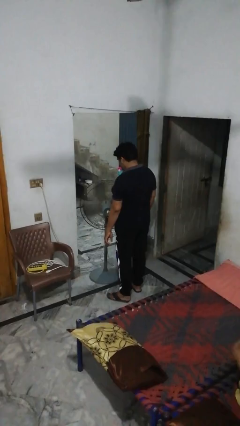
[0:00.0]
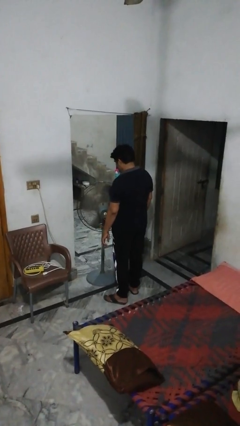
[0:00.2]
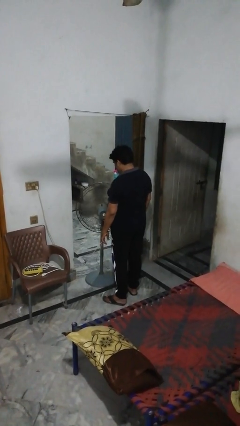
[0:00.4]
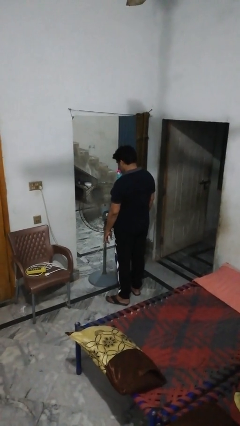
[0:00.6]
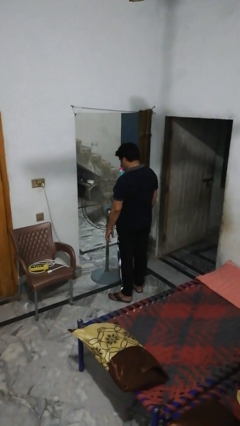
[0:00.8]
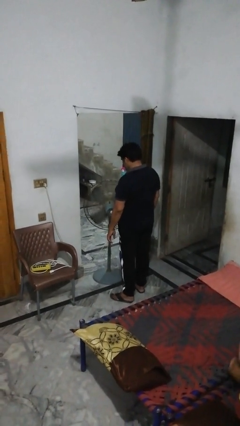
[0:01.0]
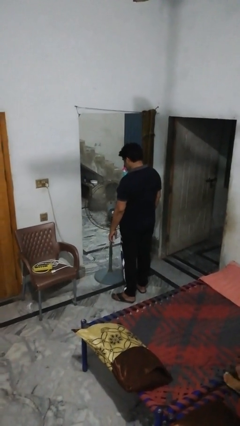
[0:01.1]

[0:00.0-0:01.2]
person turns off fan

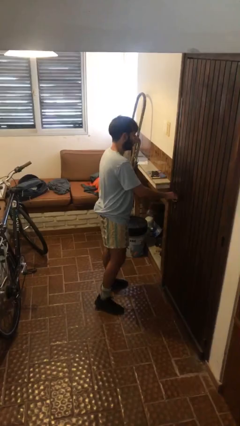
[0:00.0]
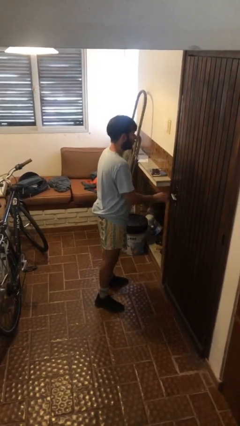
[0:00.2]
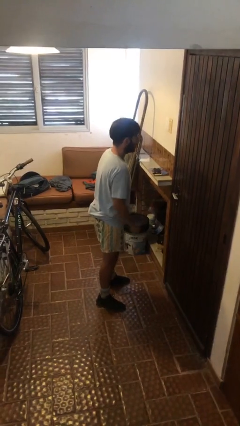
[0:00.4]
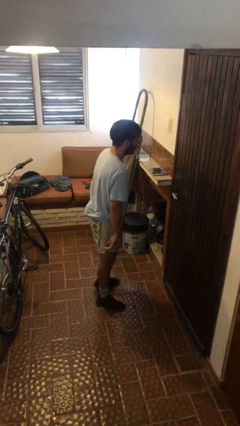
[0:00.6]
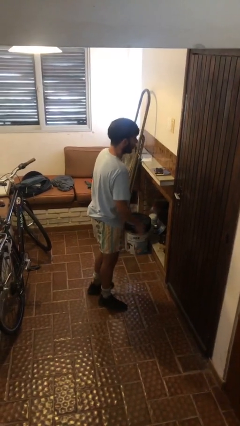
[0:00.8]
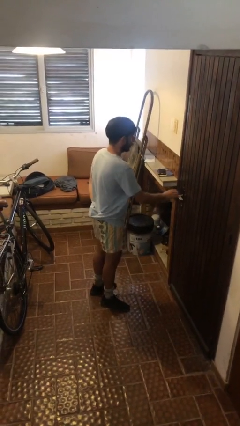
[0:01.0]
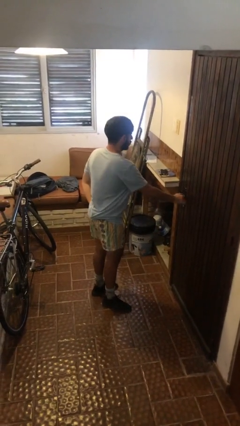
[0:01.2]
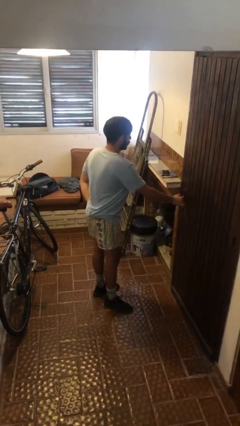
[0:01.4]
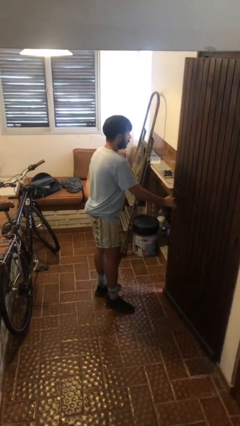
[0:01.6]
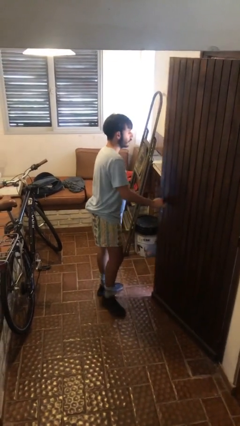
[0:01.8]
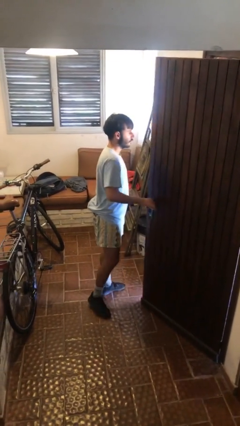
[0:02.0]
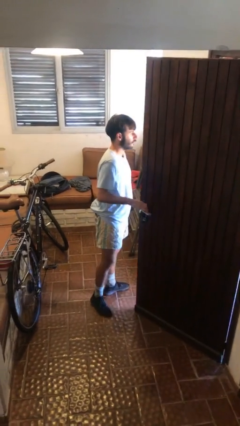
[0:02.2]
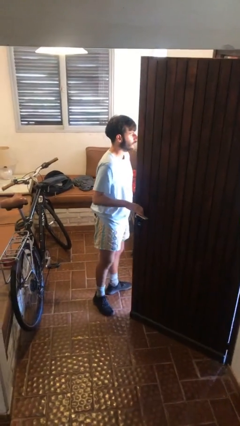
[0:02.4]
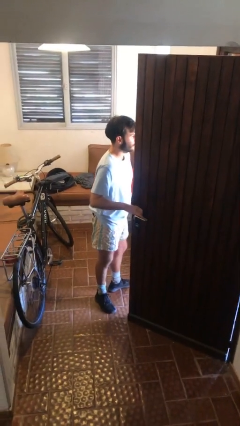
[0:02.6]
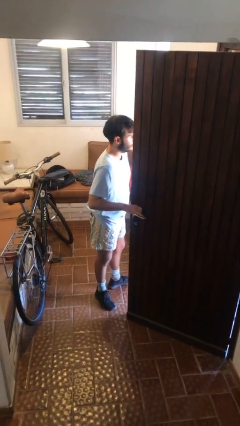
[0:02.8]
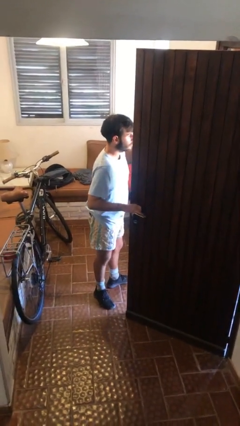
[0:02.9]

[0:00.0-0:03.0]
person opens facility door

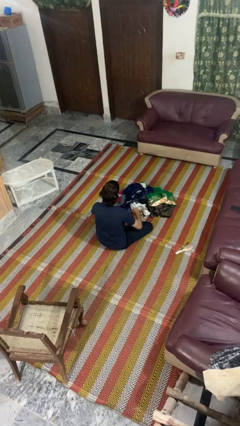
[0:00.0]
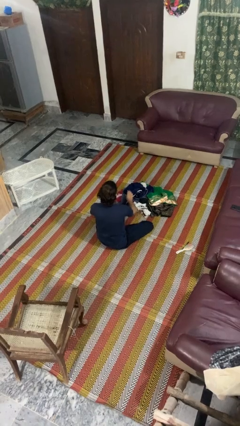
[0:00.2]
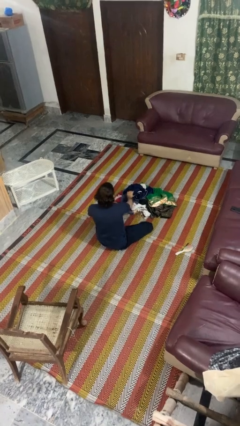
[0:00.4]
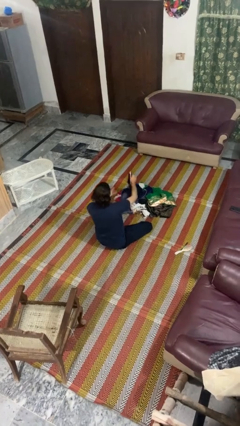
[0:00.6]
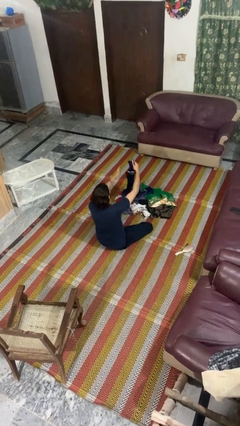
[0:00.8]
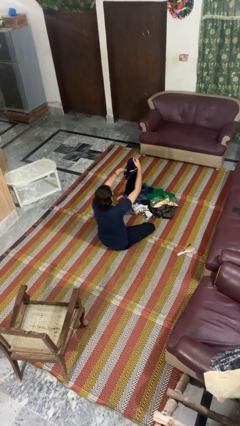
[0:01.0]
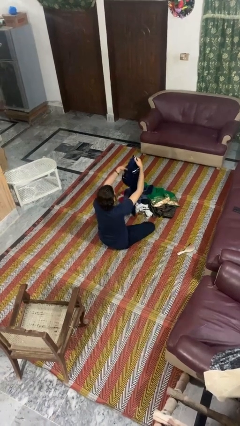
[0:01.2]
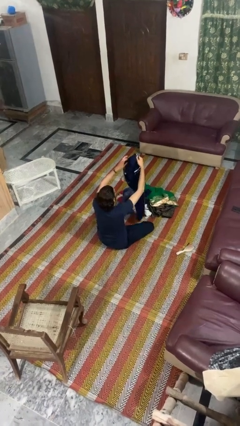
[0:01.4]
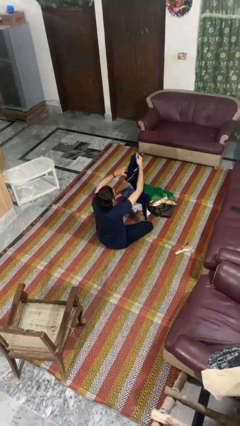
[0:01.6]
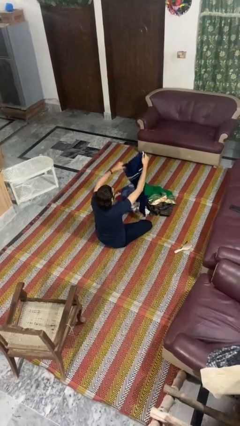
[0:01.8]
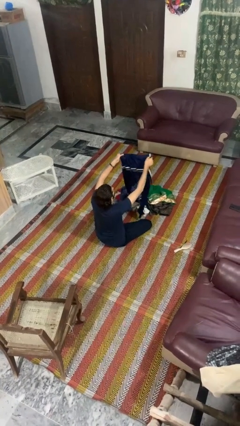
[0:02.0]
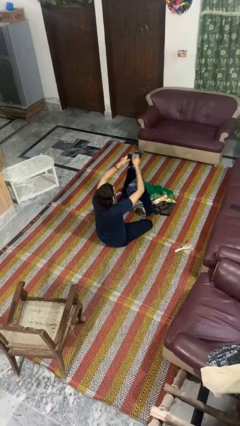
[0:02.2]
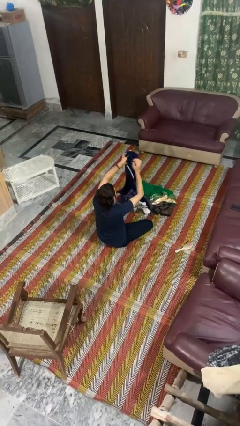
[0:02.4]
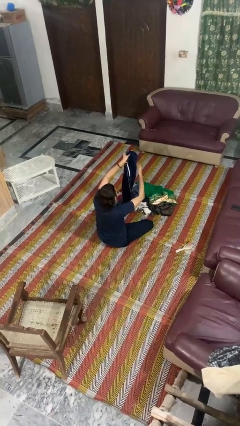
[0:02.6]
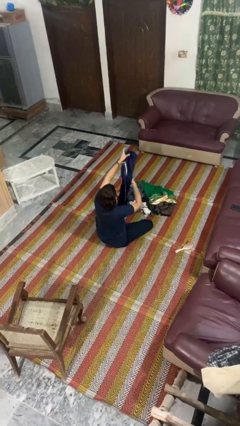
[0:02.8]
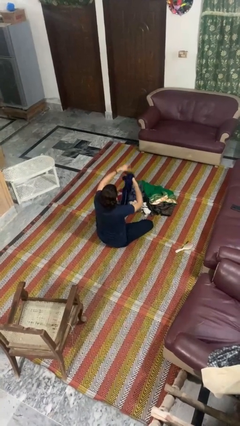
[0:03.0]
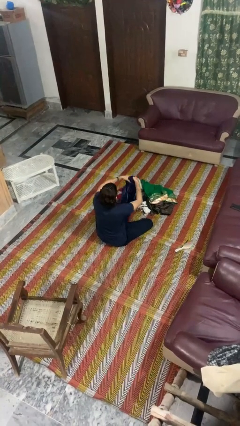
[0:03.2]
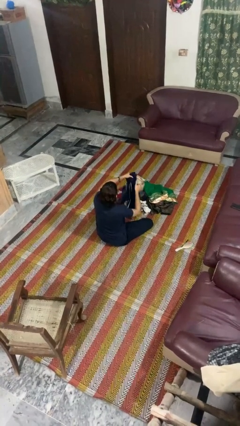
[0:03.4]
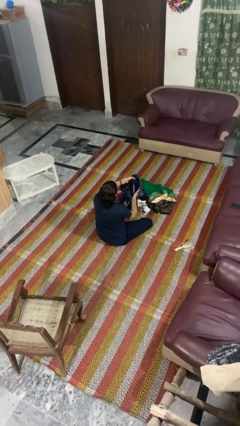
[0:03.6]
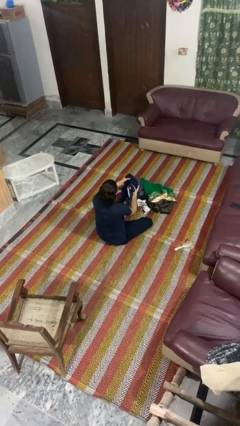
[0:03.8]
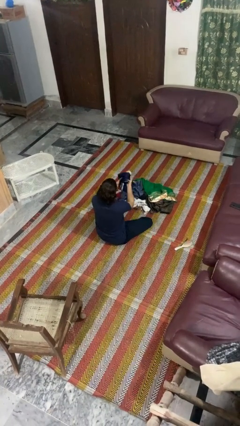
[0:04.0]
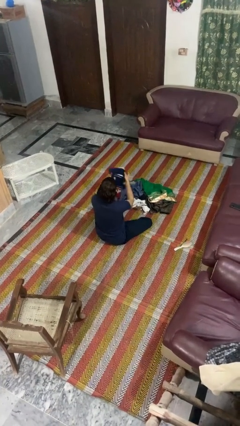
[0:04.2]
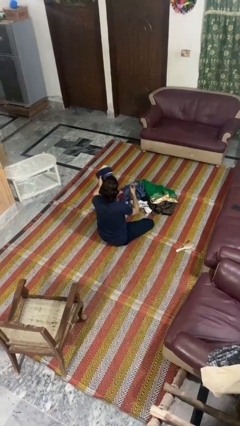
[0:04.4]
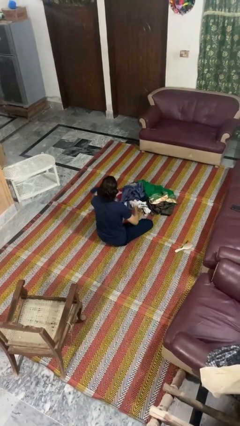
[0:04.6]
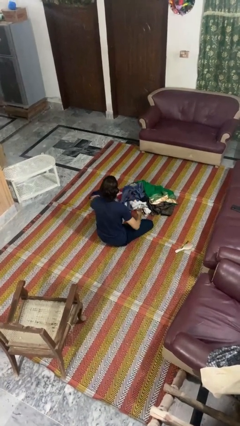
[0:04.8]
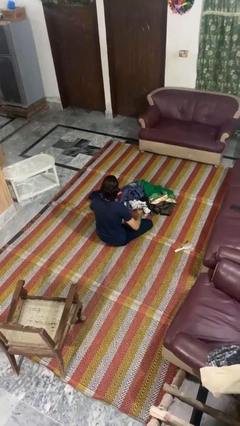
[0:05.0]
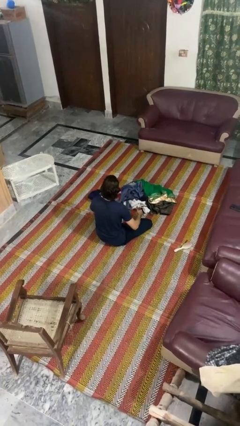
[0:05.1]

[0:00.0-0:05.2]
person folds pants

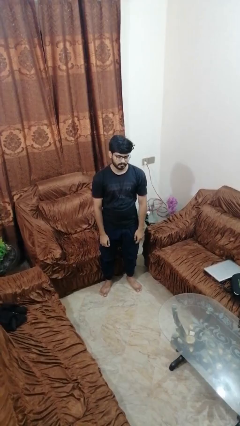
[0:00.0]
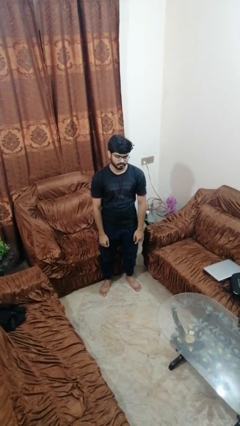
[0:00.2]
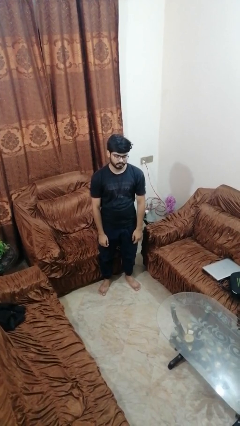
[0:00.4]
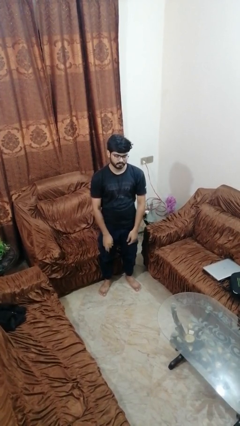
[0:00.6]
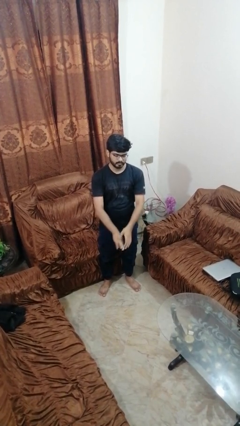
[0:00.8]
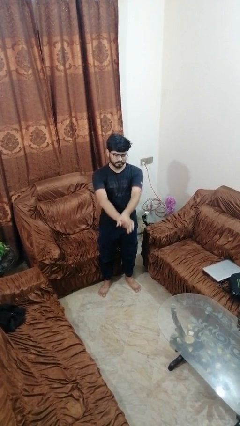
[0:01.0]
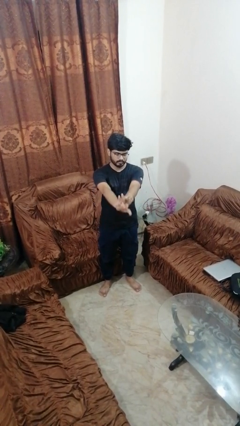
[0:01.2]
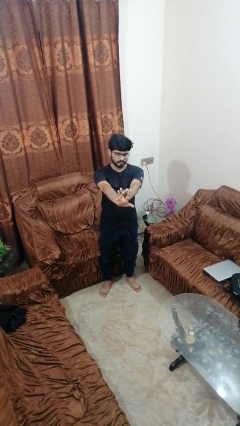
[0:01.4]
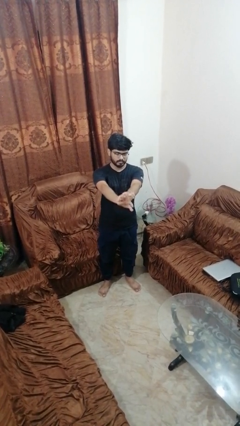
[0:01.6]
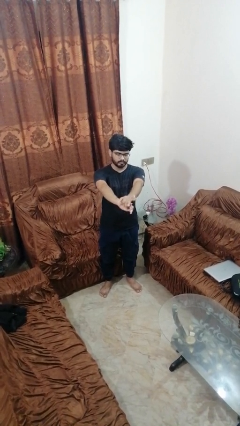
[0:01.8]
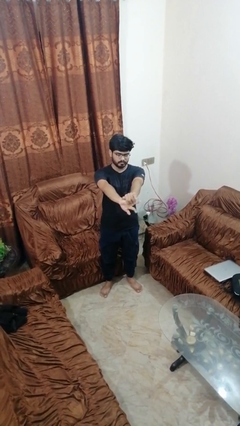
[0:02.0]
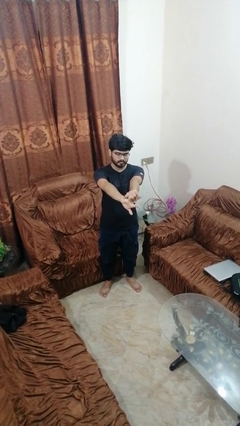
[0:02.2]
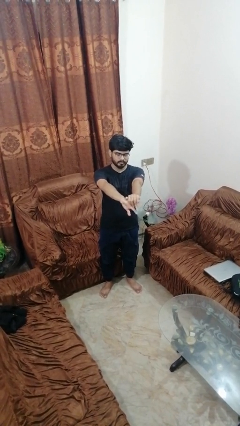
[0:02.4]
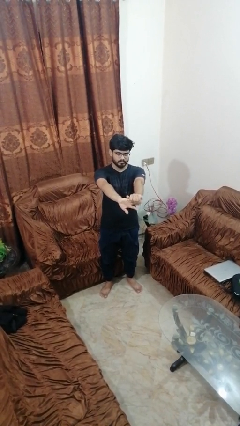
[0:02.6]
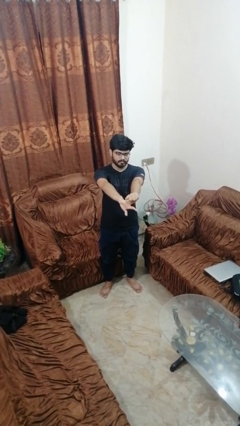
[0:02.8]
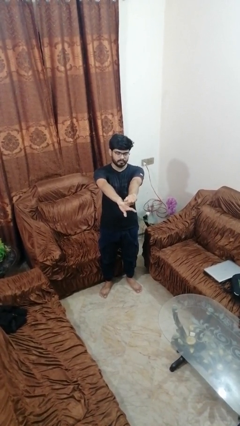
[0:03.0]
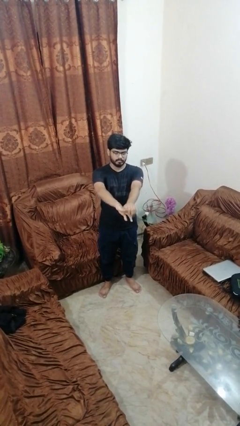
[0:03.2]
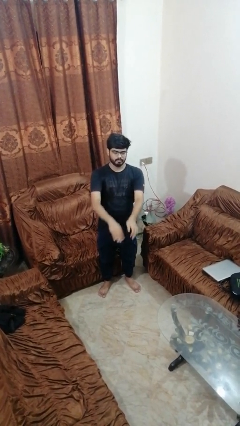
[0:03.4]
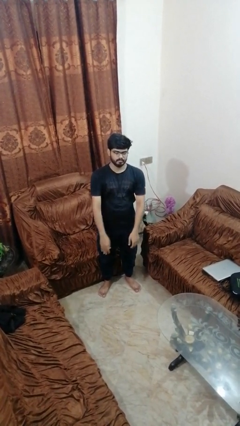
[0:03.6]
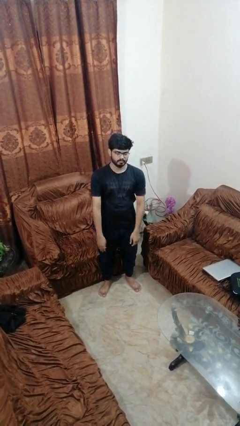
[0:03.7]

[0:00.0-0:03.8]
person cracks knuckles

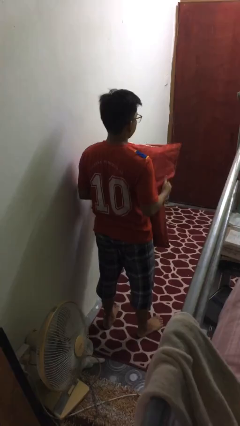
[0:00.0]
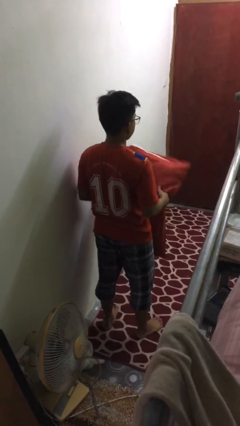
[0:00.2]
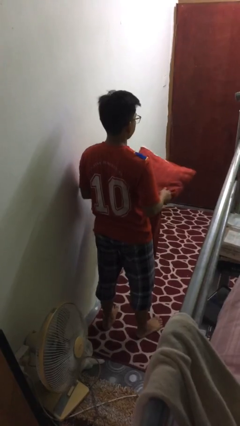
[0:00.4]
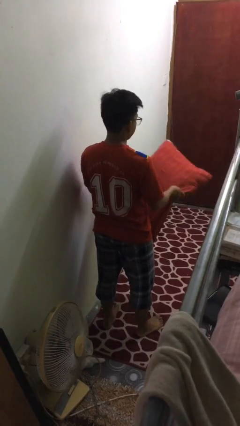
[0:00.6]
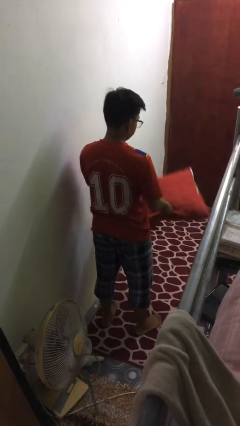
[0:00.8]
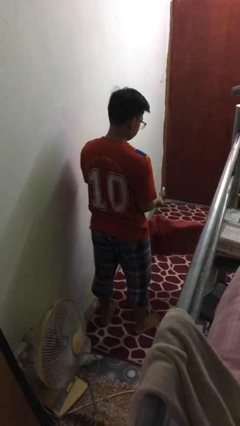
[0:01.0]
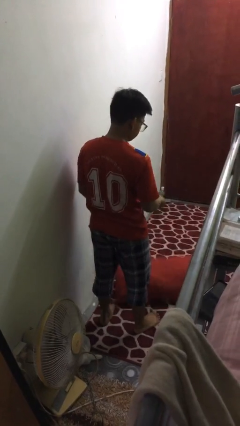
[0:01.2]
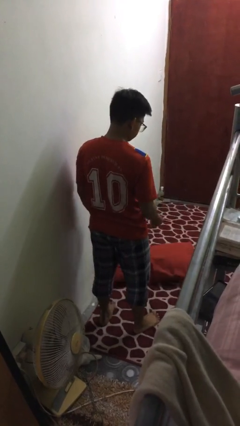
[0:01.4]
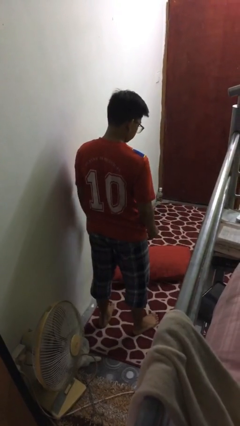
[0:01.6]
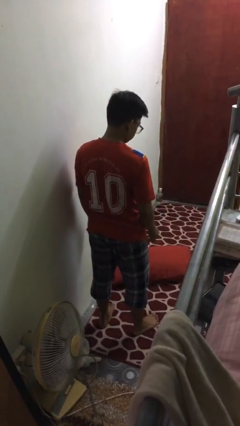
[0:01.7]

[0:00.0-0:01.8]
person drops object

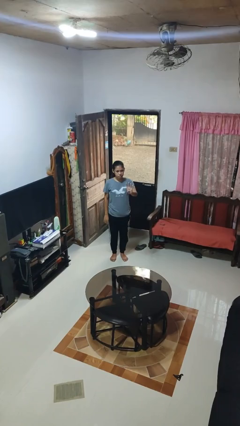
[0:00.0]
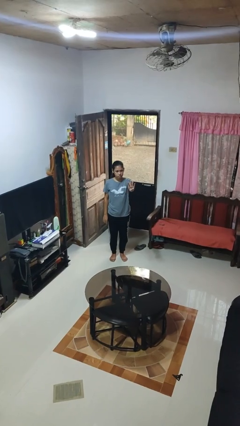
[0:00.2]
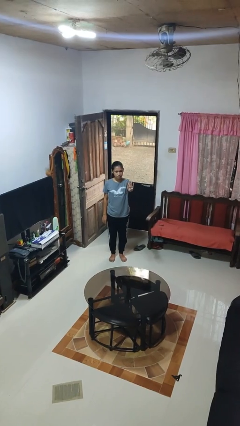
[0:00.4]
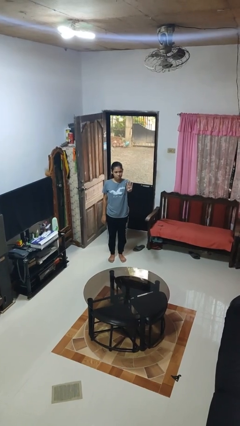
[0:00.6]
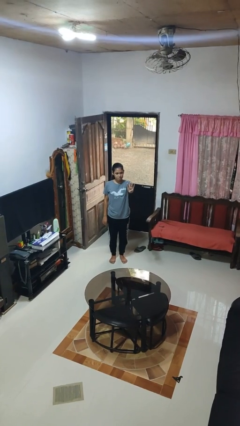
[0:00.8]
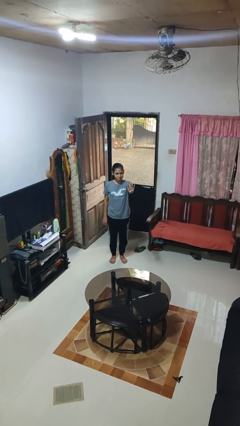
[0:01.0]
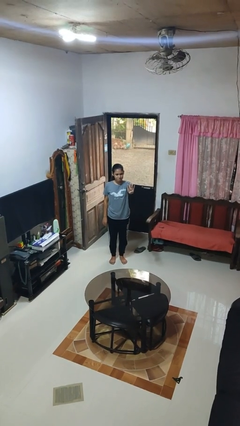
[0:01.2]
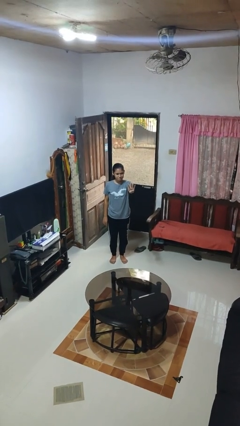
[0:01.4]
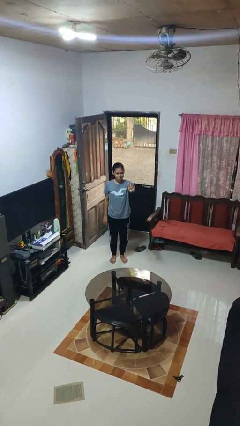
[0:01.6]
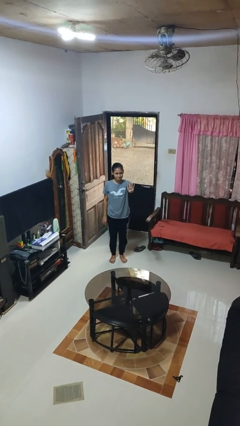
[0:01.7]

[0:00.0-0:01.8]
person gestures number four

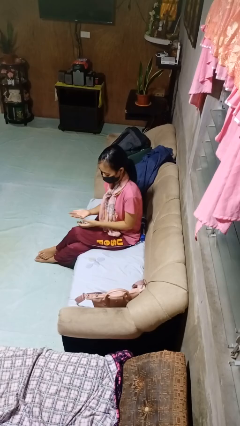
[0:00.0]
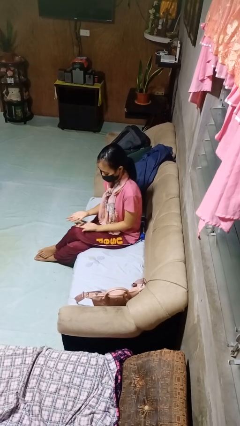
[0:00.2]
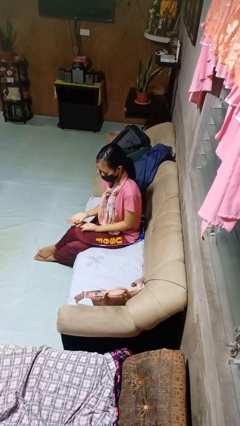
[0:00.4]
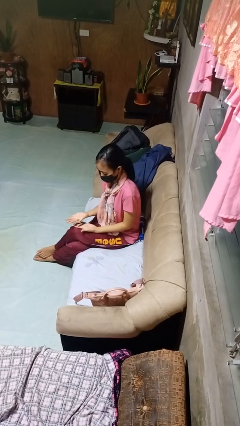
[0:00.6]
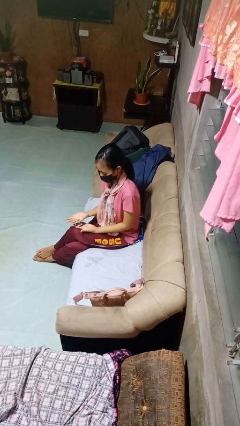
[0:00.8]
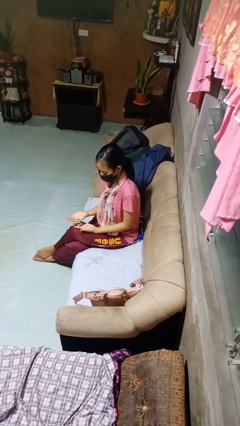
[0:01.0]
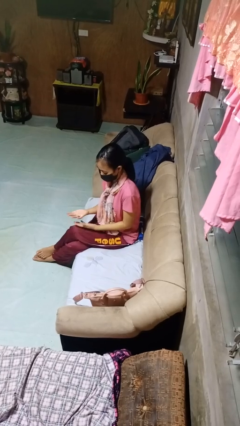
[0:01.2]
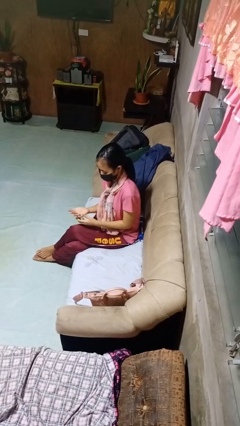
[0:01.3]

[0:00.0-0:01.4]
person takes off ring
